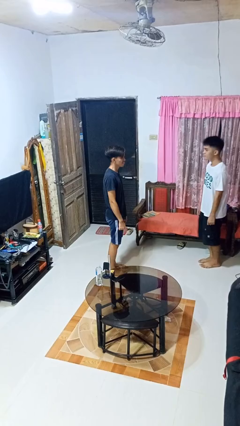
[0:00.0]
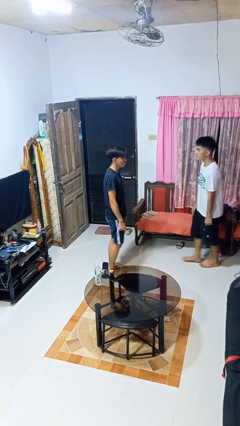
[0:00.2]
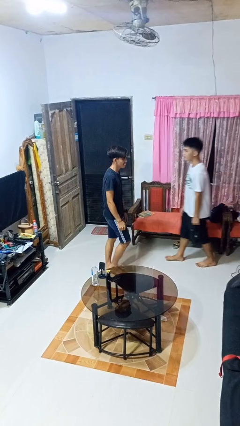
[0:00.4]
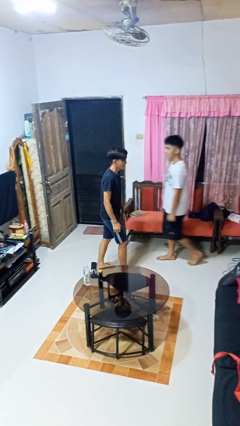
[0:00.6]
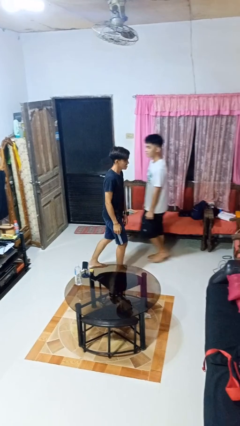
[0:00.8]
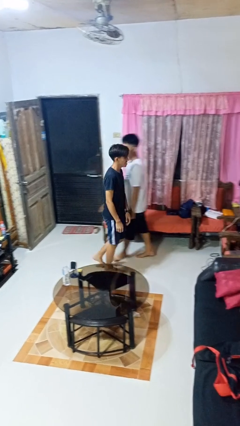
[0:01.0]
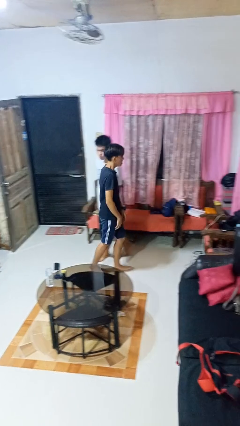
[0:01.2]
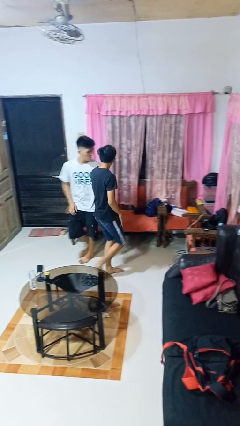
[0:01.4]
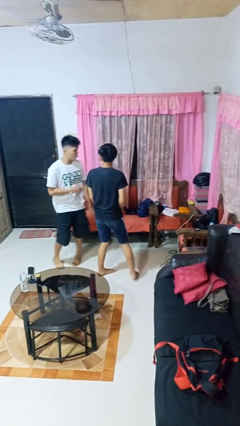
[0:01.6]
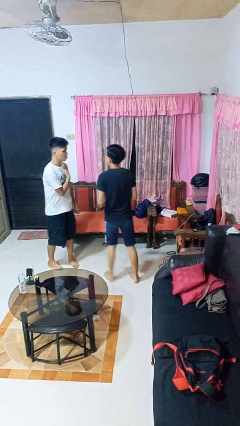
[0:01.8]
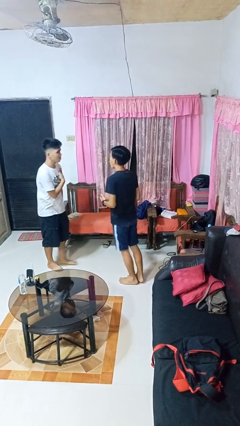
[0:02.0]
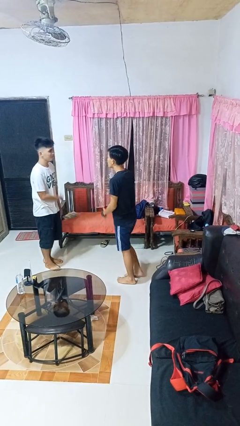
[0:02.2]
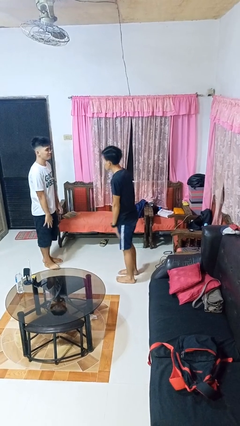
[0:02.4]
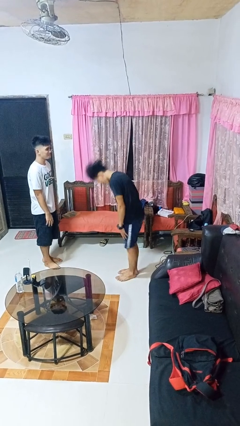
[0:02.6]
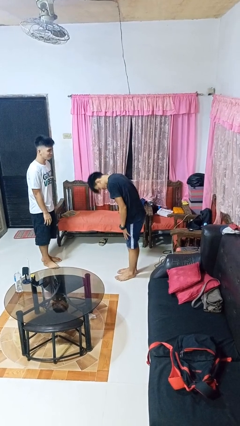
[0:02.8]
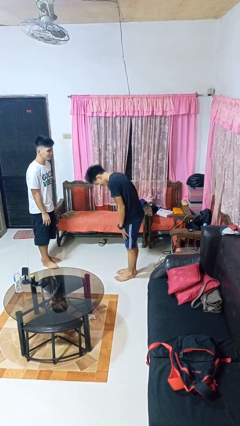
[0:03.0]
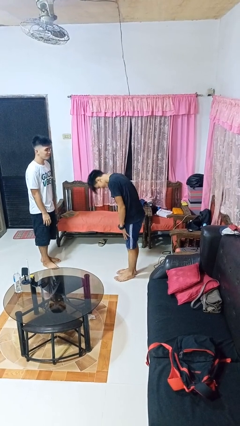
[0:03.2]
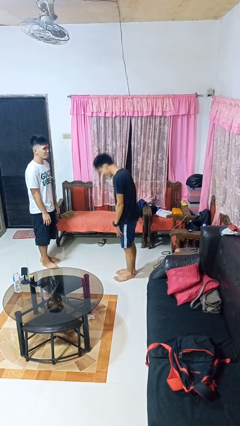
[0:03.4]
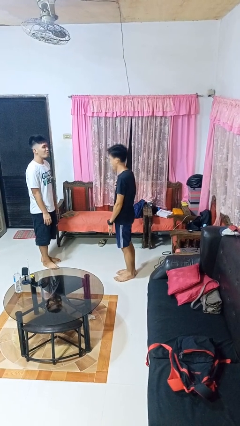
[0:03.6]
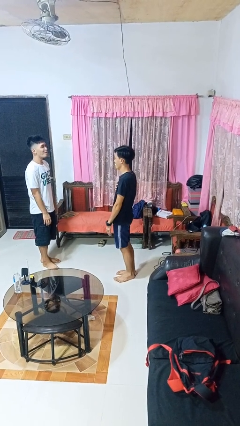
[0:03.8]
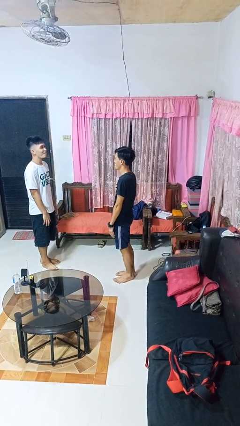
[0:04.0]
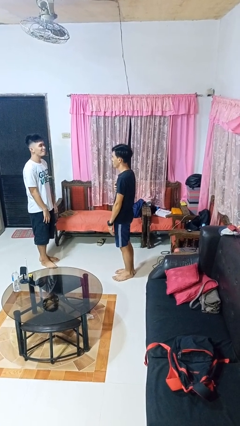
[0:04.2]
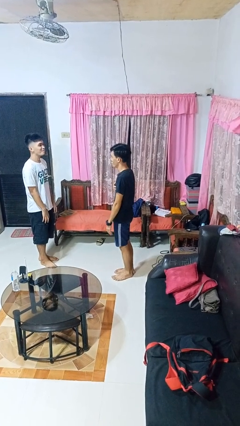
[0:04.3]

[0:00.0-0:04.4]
person bumps into person

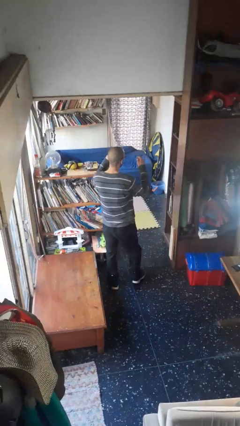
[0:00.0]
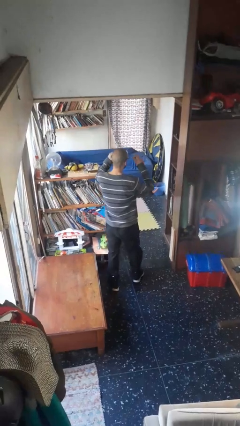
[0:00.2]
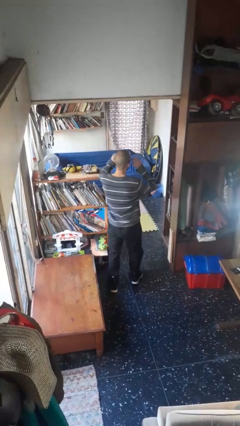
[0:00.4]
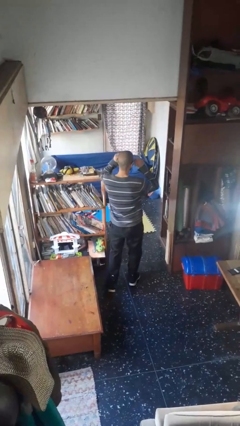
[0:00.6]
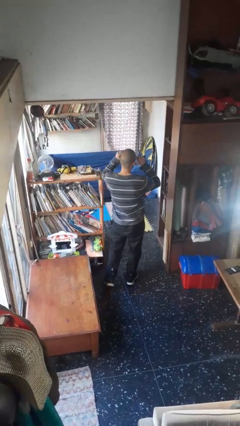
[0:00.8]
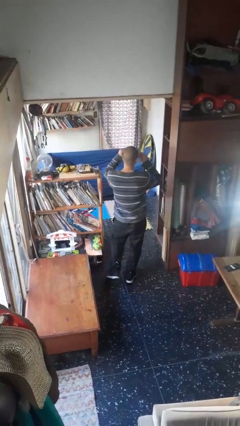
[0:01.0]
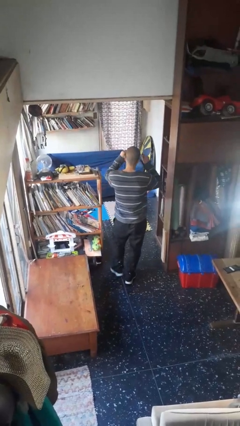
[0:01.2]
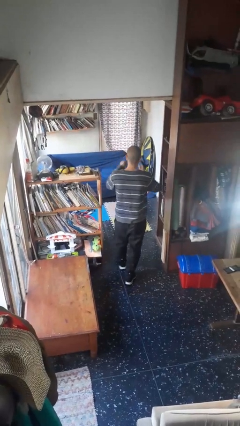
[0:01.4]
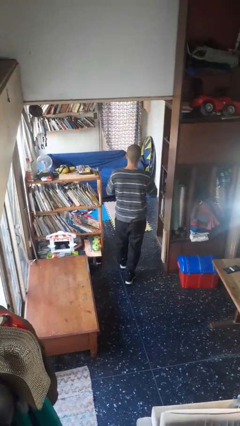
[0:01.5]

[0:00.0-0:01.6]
person takes off glasses

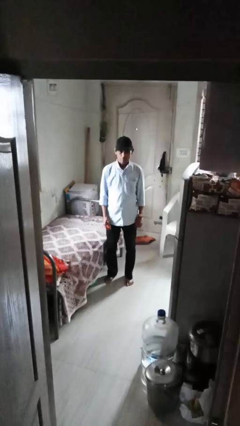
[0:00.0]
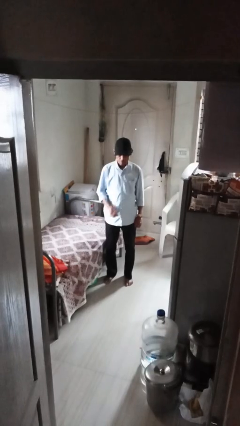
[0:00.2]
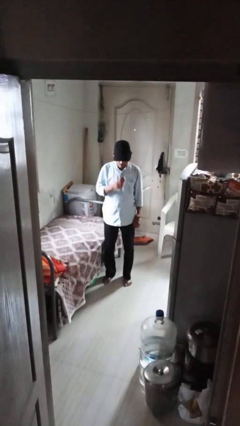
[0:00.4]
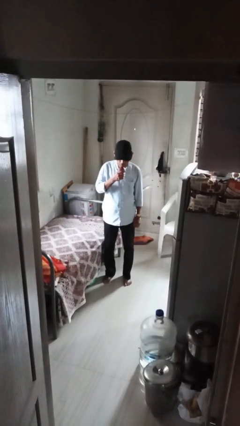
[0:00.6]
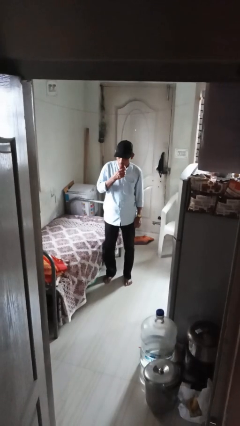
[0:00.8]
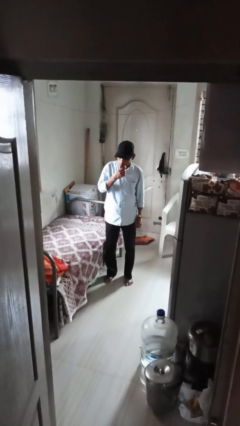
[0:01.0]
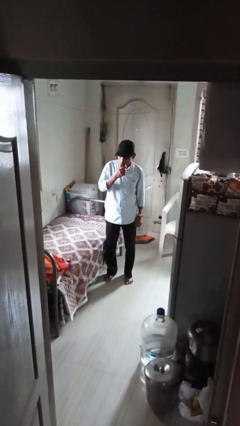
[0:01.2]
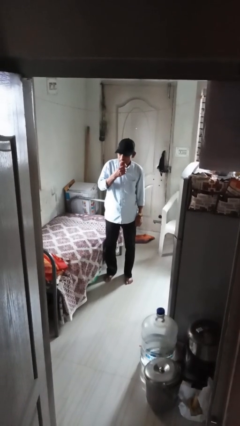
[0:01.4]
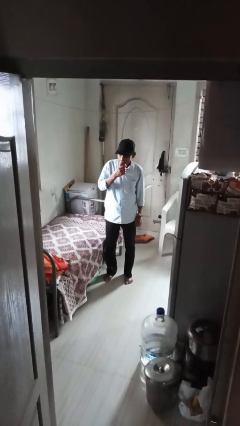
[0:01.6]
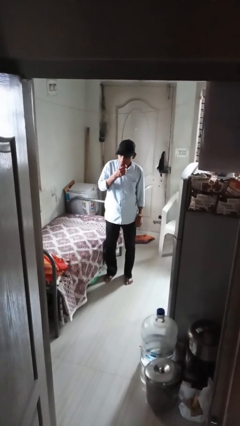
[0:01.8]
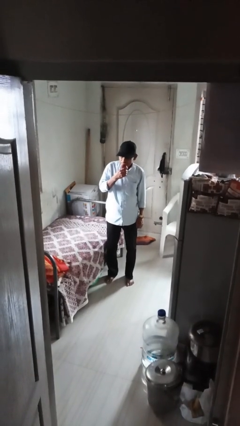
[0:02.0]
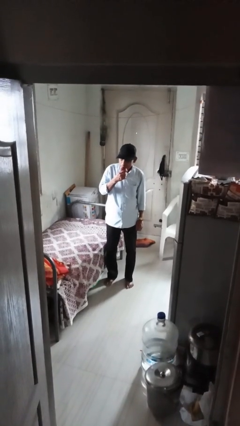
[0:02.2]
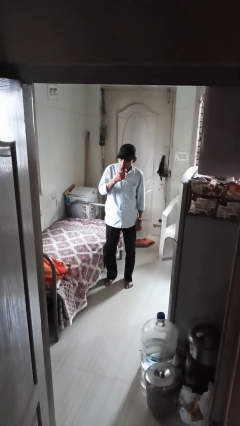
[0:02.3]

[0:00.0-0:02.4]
person eats apple

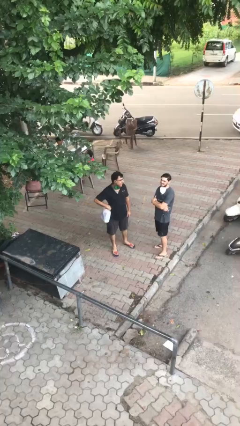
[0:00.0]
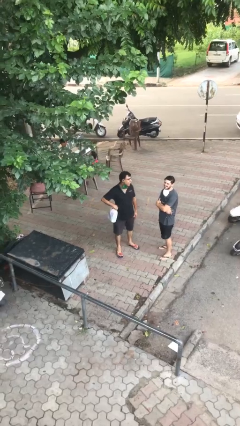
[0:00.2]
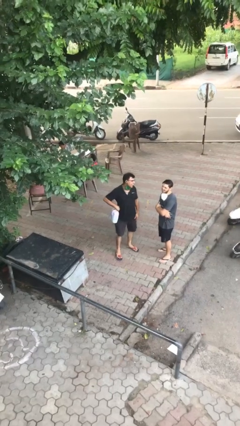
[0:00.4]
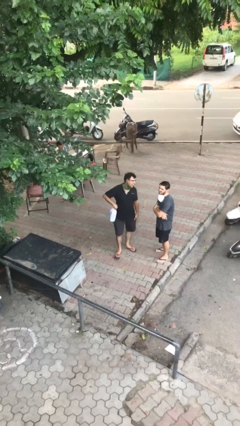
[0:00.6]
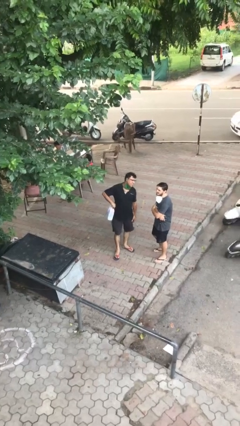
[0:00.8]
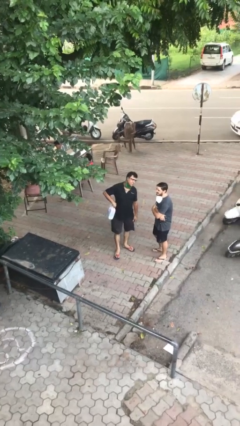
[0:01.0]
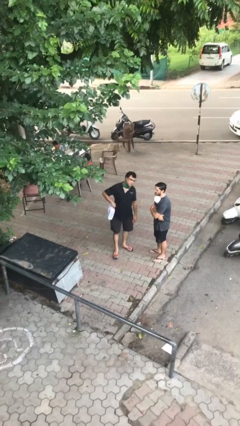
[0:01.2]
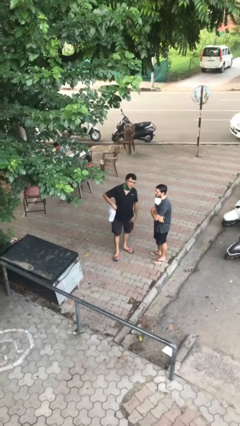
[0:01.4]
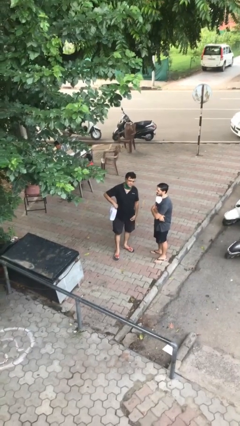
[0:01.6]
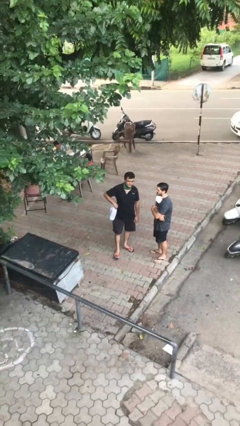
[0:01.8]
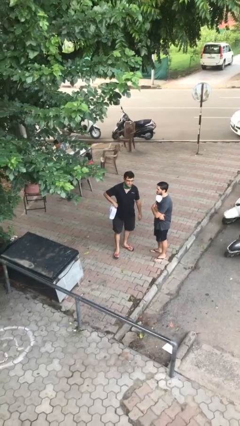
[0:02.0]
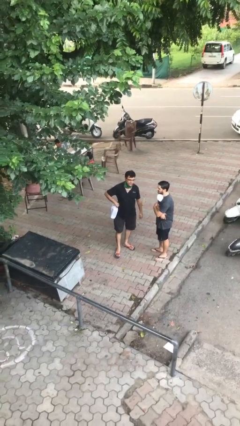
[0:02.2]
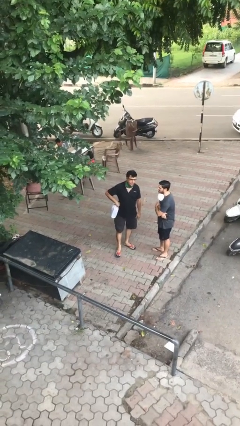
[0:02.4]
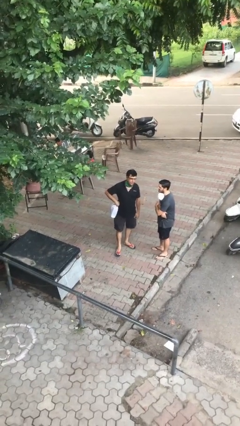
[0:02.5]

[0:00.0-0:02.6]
person laughs with person

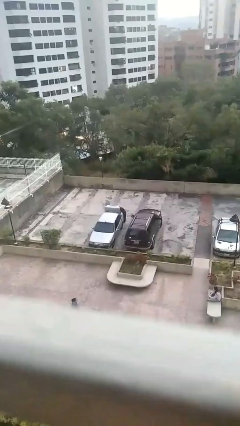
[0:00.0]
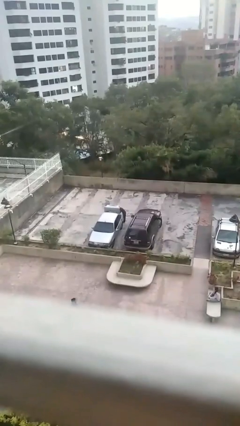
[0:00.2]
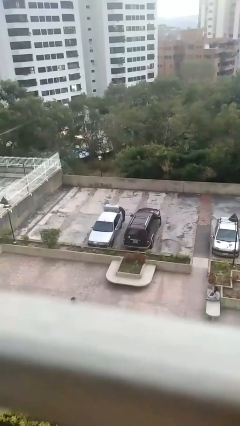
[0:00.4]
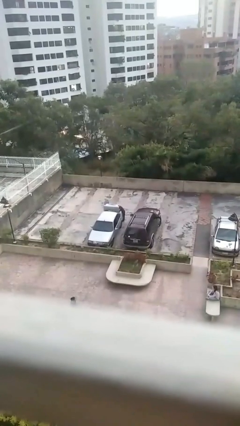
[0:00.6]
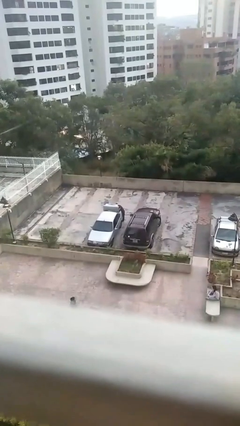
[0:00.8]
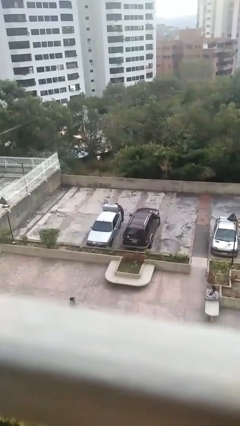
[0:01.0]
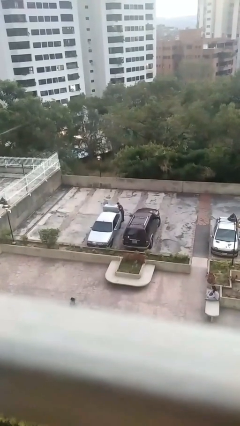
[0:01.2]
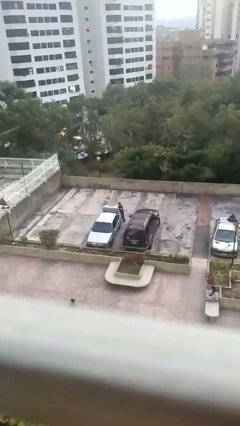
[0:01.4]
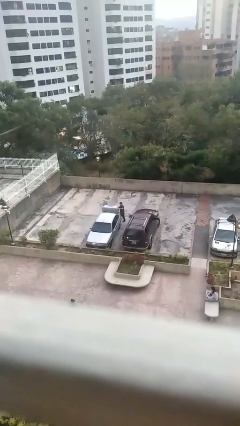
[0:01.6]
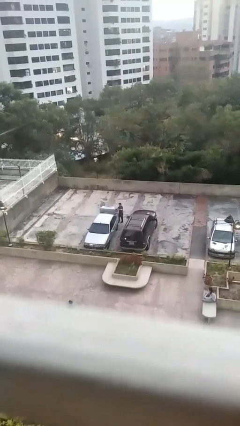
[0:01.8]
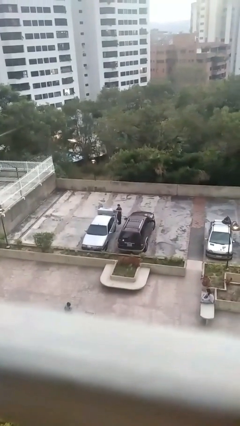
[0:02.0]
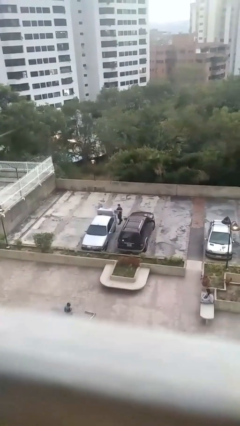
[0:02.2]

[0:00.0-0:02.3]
person unloads car

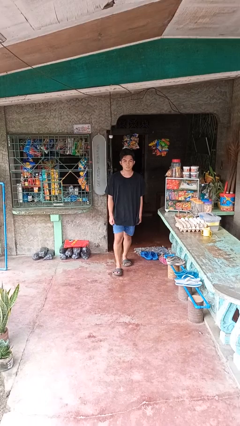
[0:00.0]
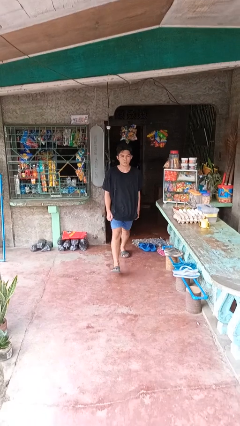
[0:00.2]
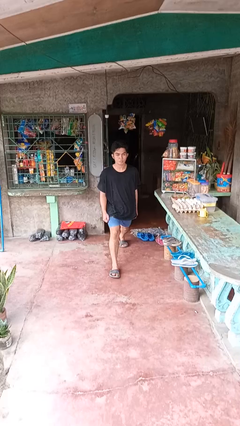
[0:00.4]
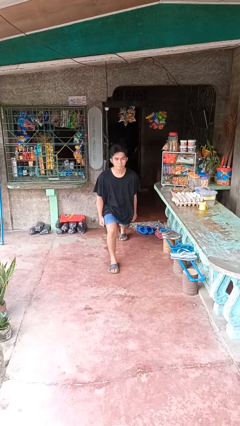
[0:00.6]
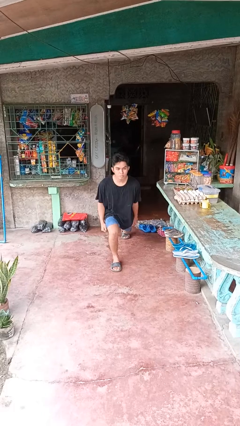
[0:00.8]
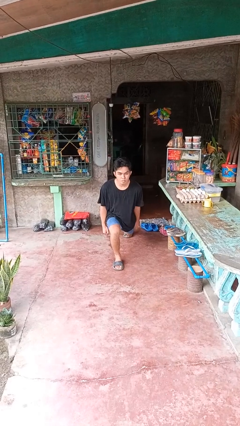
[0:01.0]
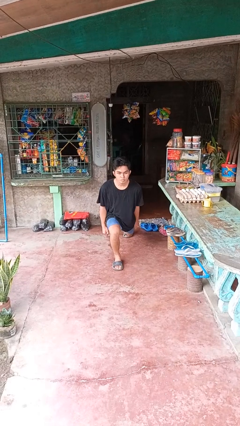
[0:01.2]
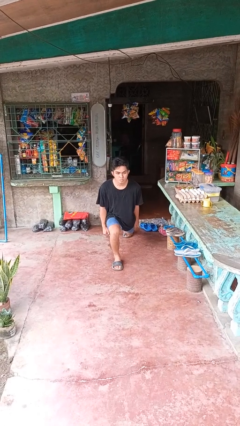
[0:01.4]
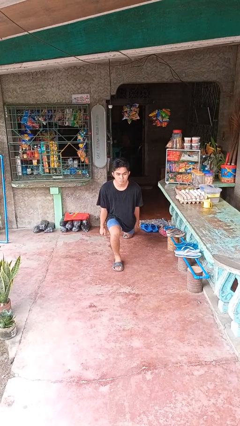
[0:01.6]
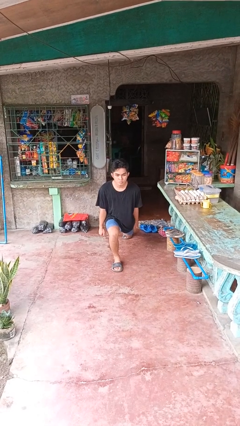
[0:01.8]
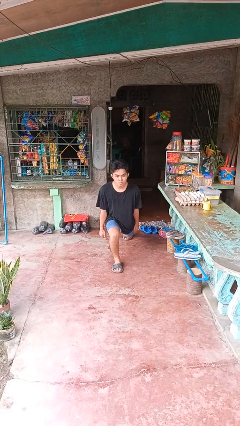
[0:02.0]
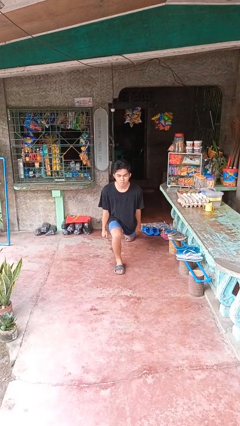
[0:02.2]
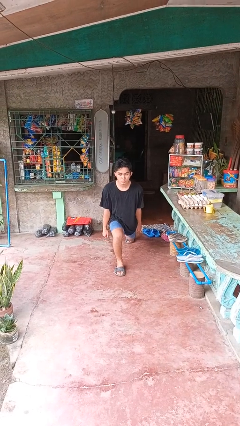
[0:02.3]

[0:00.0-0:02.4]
person exercises with lunges

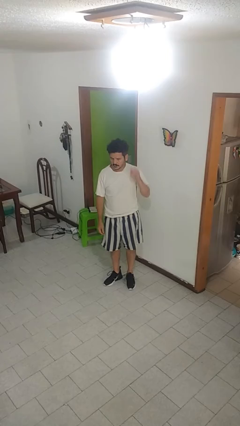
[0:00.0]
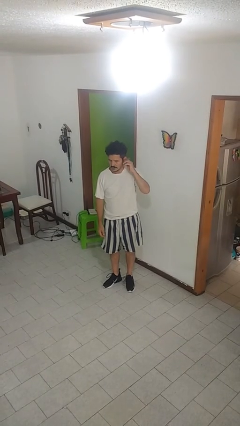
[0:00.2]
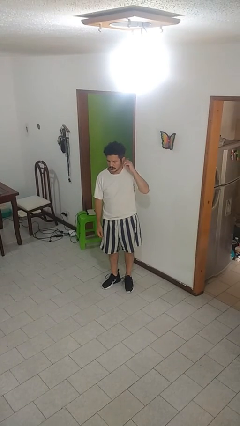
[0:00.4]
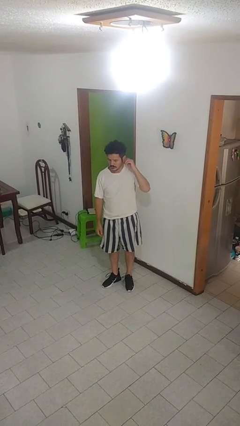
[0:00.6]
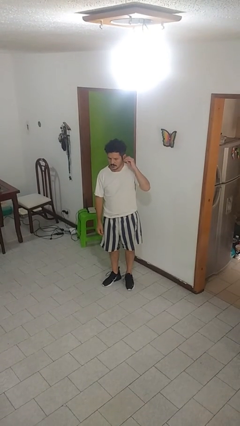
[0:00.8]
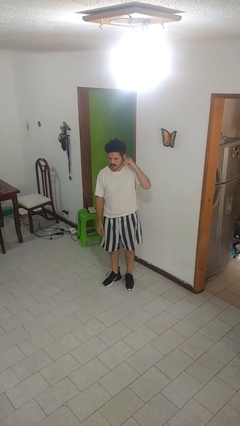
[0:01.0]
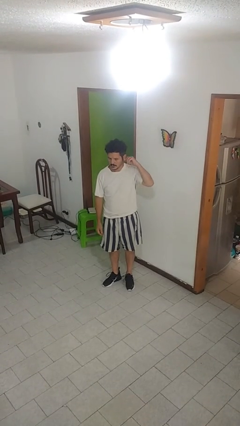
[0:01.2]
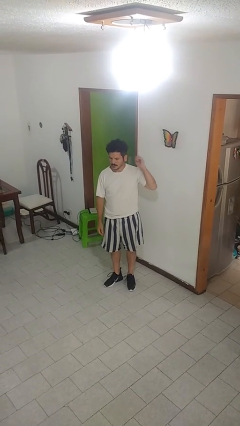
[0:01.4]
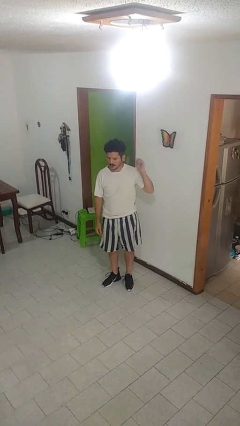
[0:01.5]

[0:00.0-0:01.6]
person touches earlobe
